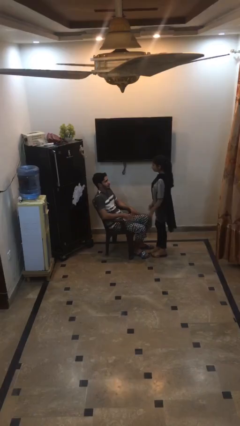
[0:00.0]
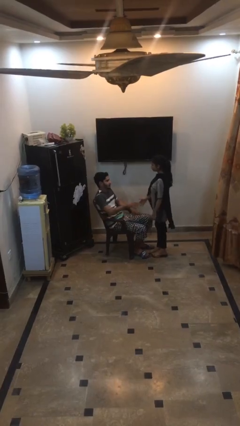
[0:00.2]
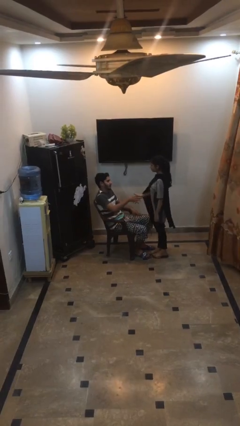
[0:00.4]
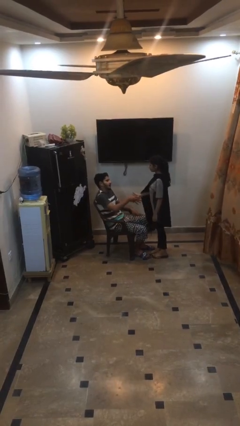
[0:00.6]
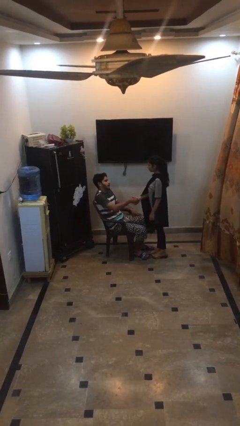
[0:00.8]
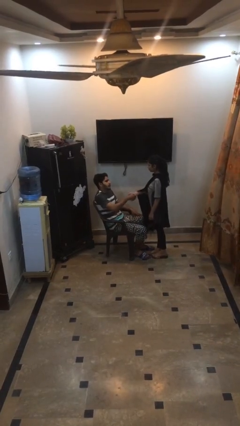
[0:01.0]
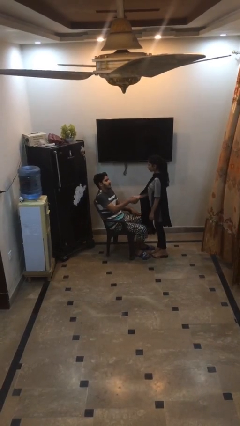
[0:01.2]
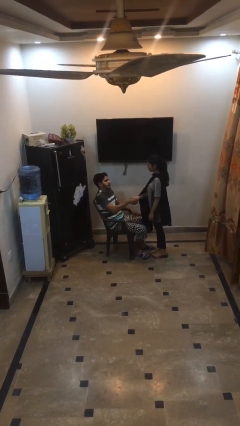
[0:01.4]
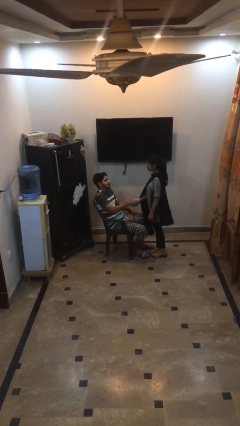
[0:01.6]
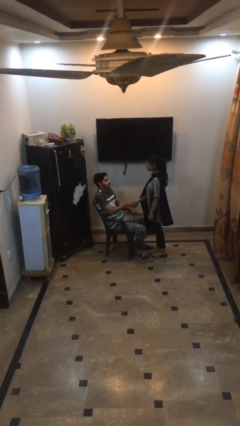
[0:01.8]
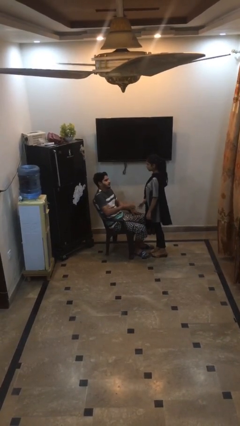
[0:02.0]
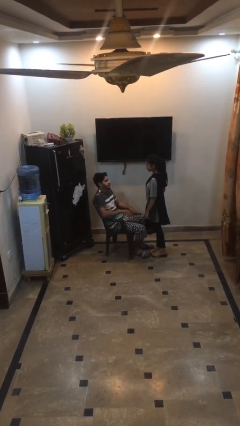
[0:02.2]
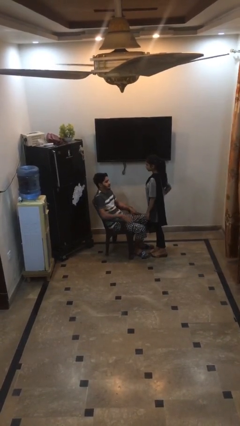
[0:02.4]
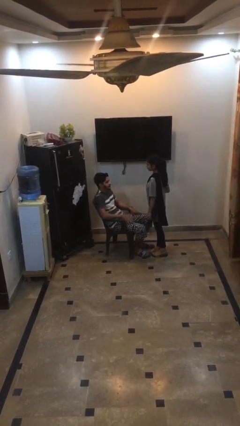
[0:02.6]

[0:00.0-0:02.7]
person shakes hand

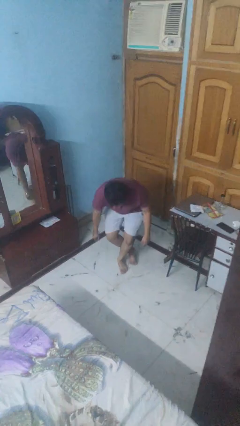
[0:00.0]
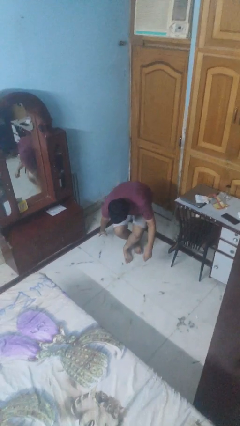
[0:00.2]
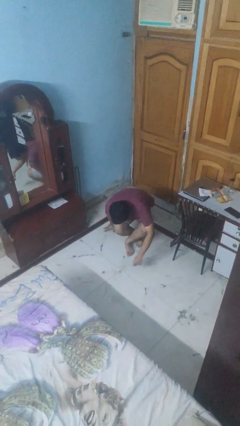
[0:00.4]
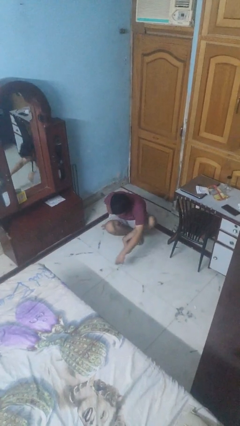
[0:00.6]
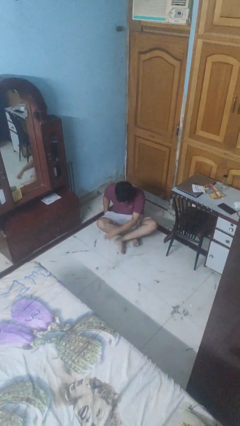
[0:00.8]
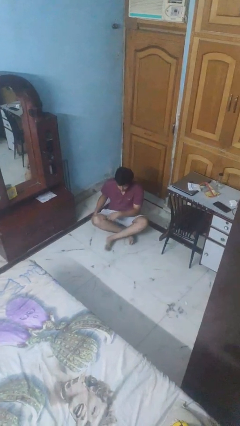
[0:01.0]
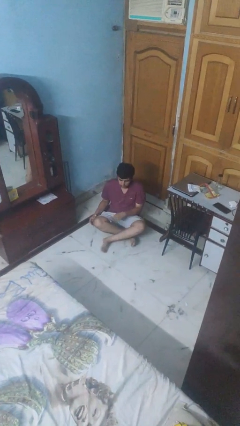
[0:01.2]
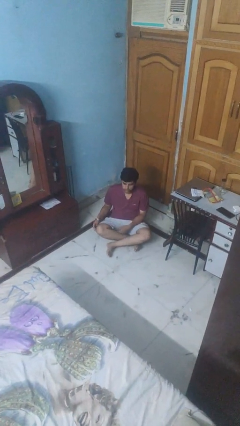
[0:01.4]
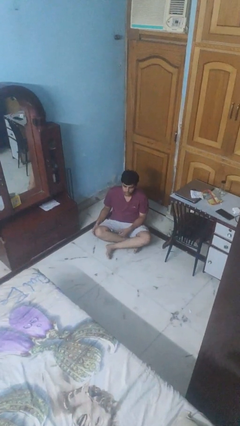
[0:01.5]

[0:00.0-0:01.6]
person sits crisscross

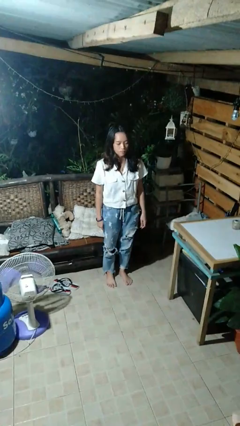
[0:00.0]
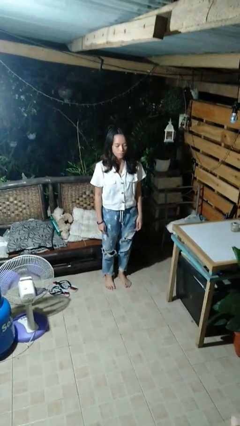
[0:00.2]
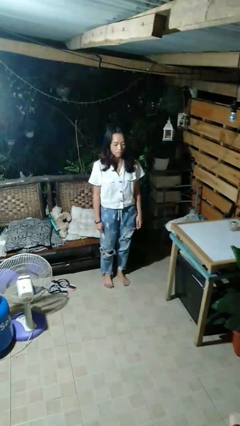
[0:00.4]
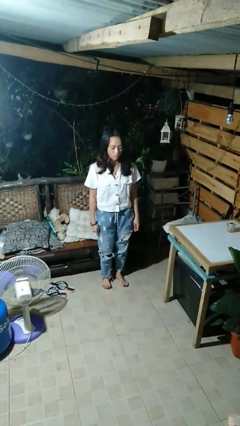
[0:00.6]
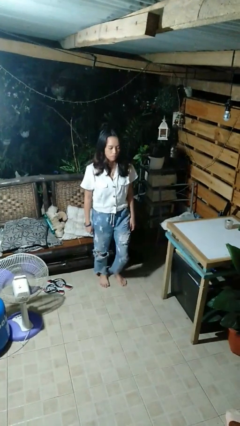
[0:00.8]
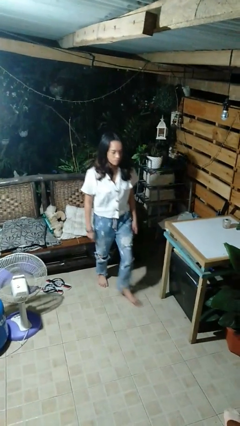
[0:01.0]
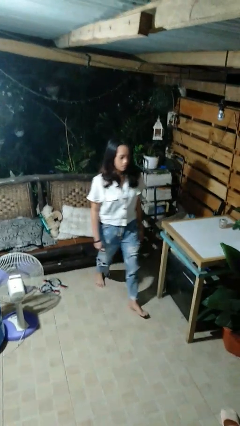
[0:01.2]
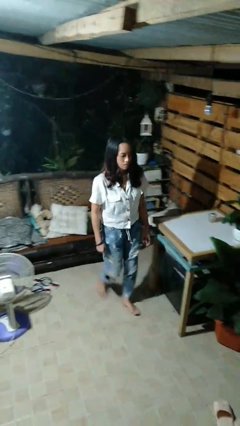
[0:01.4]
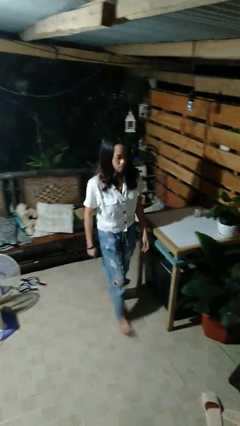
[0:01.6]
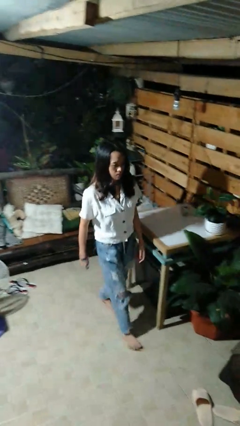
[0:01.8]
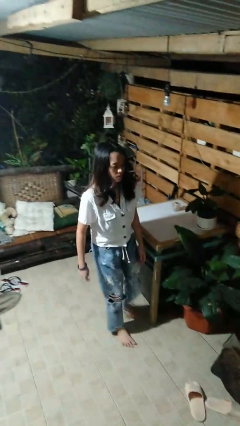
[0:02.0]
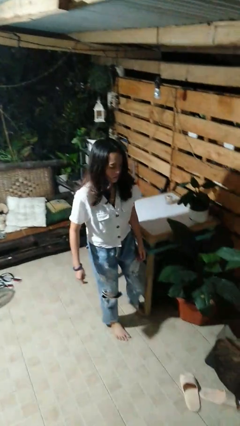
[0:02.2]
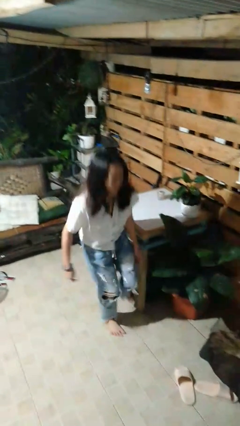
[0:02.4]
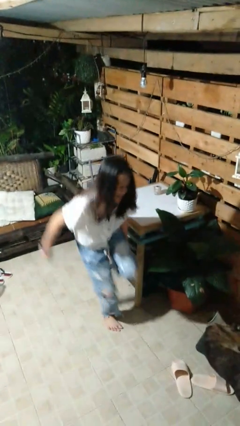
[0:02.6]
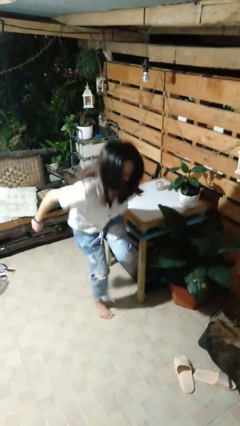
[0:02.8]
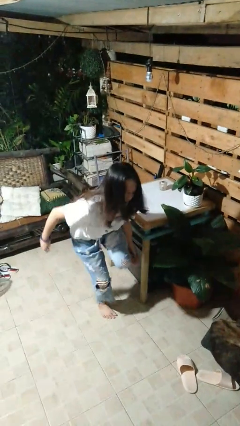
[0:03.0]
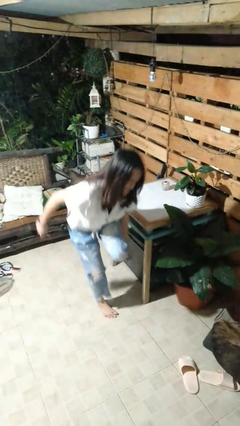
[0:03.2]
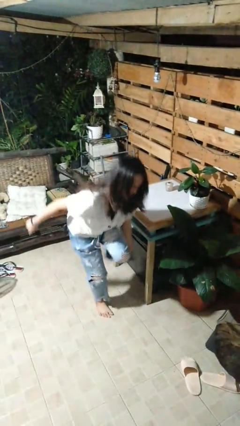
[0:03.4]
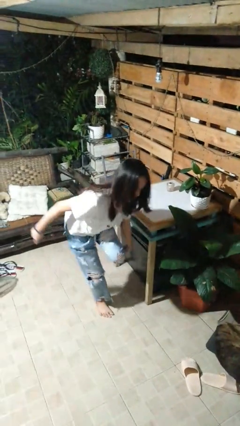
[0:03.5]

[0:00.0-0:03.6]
person stubs toe

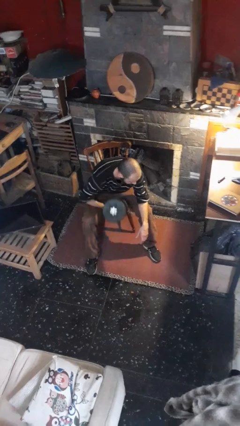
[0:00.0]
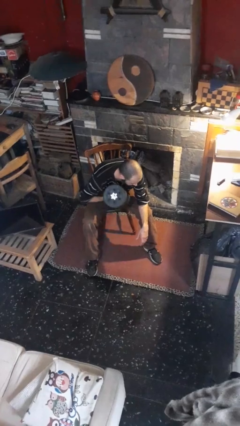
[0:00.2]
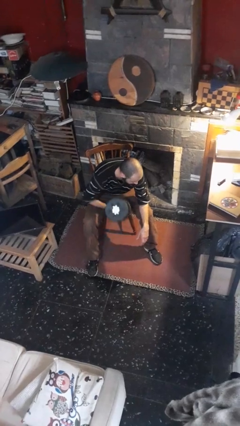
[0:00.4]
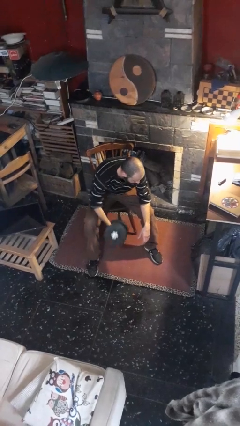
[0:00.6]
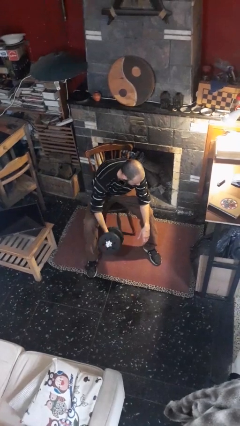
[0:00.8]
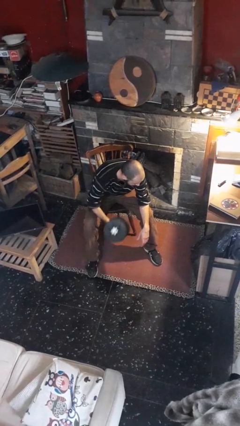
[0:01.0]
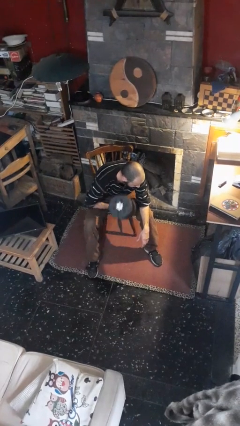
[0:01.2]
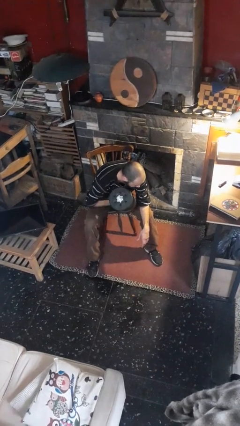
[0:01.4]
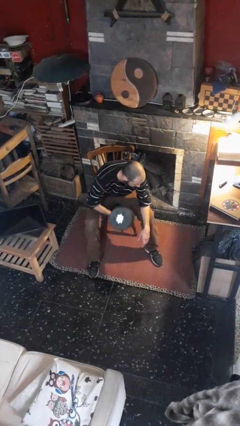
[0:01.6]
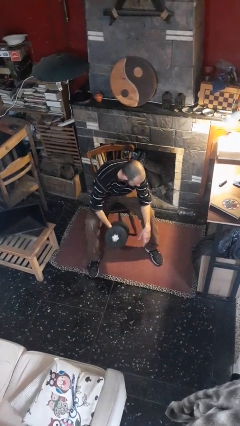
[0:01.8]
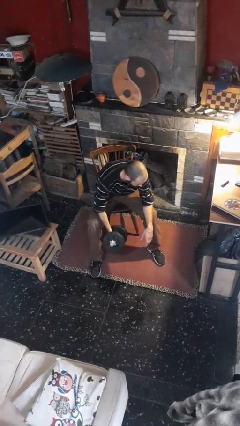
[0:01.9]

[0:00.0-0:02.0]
person lifts dumbbells

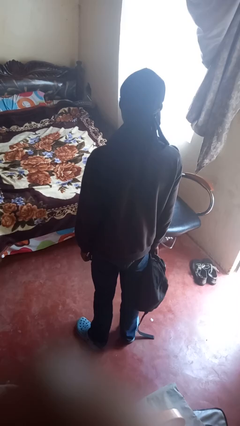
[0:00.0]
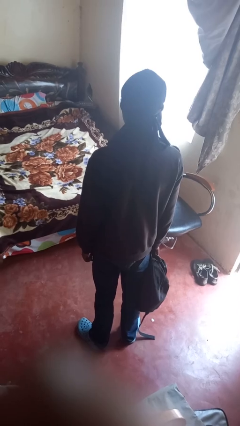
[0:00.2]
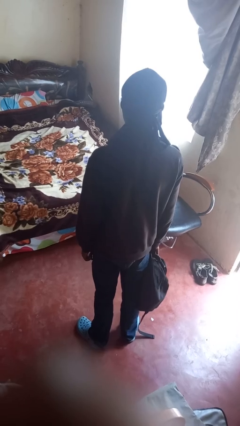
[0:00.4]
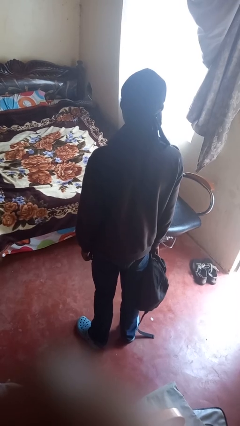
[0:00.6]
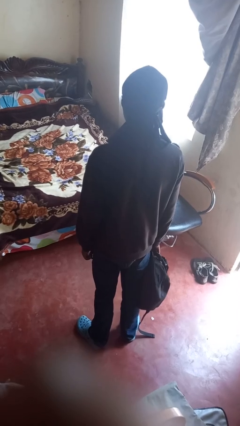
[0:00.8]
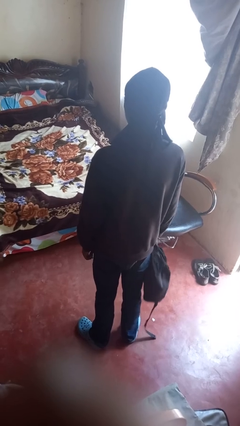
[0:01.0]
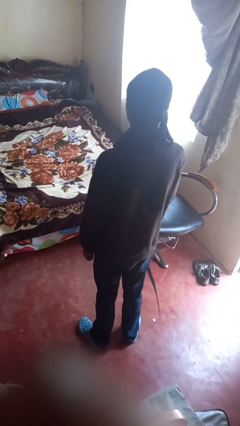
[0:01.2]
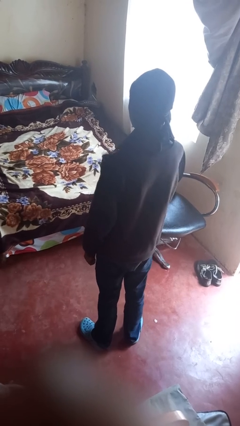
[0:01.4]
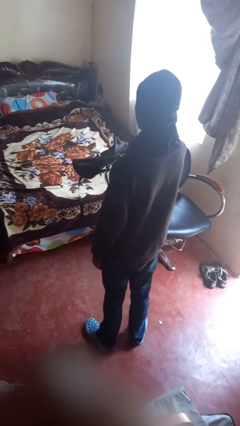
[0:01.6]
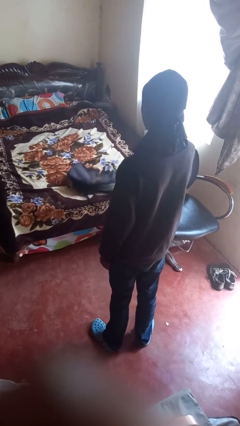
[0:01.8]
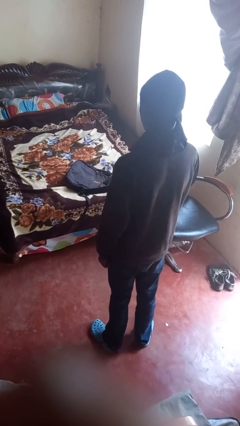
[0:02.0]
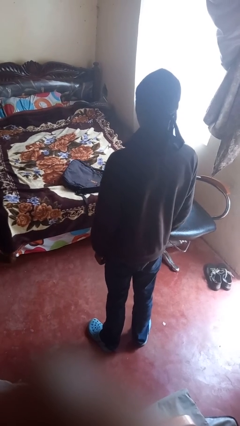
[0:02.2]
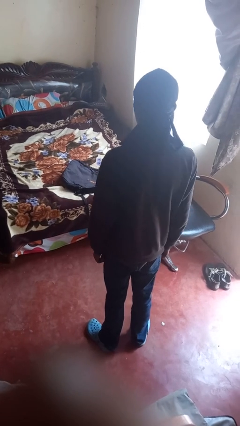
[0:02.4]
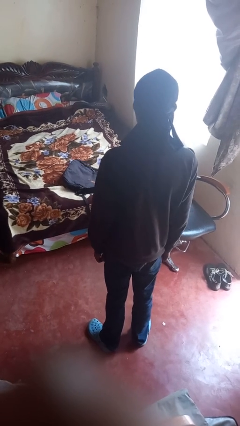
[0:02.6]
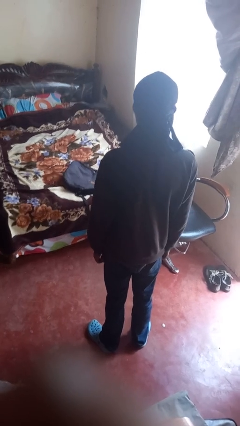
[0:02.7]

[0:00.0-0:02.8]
person throws object on bed

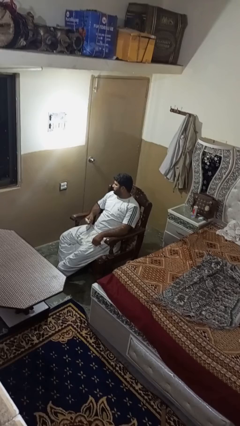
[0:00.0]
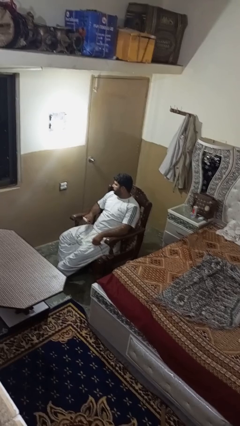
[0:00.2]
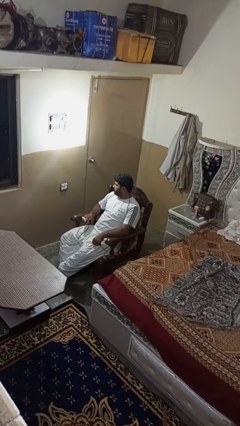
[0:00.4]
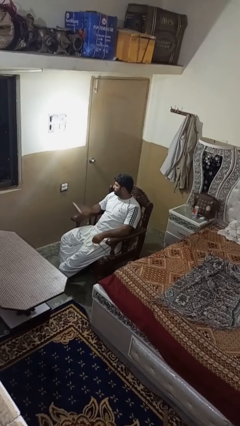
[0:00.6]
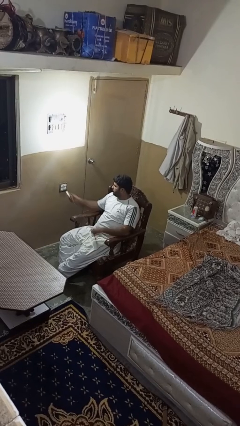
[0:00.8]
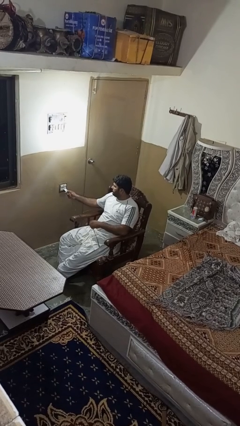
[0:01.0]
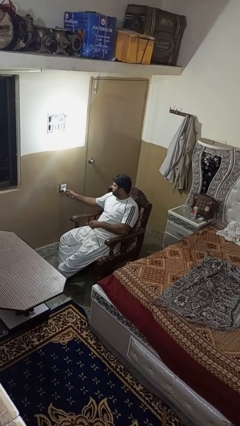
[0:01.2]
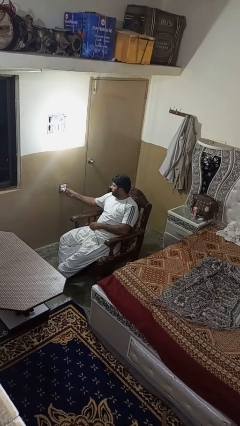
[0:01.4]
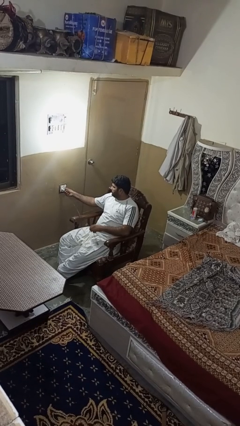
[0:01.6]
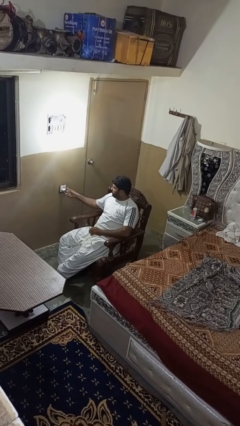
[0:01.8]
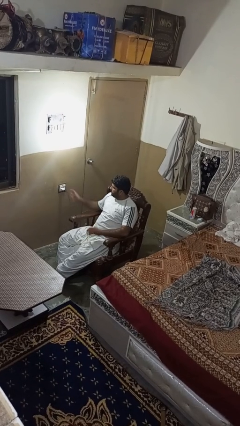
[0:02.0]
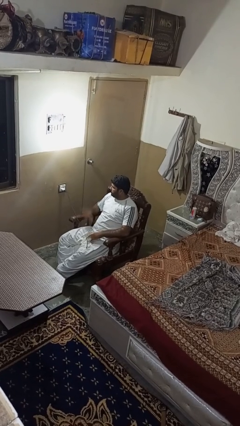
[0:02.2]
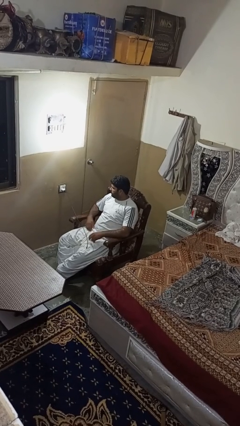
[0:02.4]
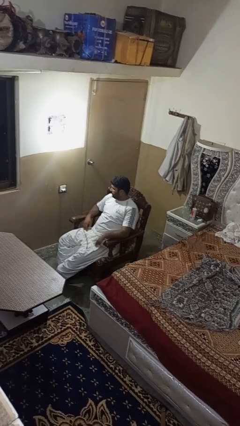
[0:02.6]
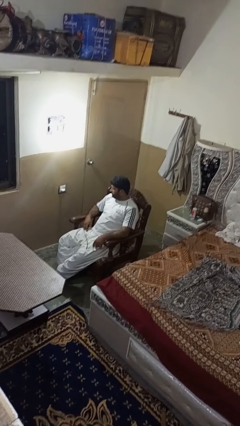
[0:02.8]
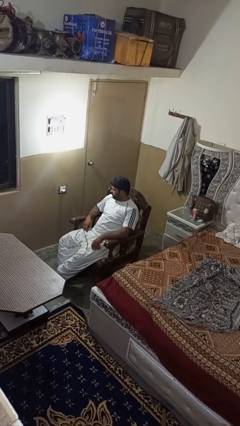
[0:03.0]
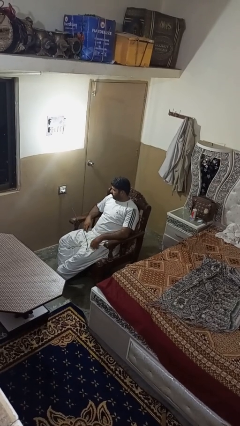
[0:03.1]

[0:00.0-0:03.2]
person plugs into electrical socket

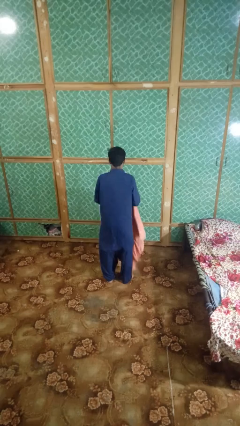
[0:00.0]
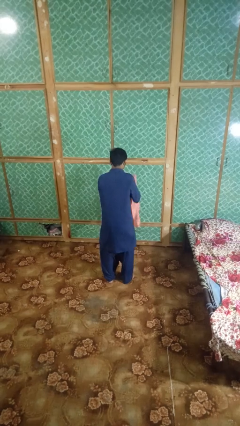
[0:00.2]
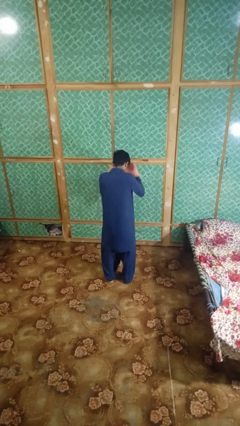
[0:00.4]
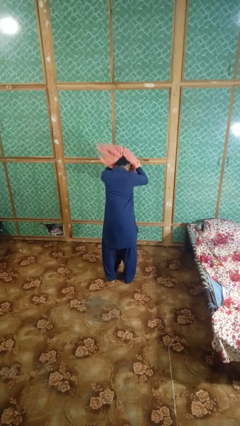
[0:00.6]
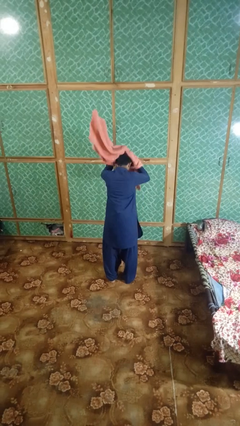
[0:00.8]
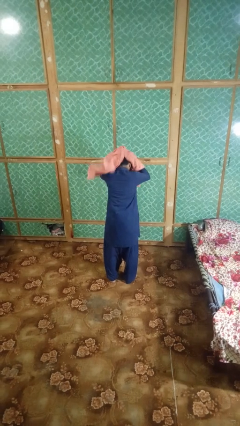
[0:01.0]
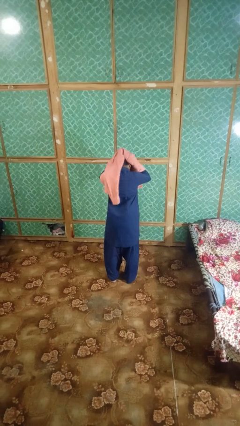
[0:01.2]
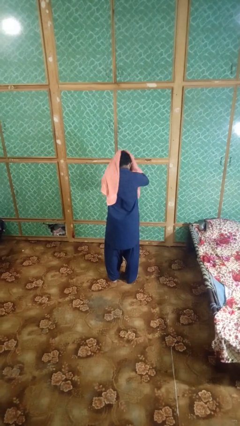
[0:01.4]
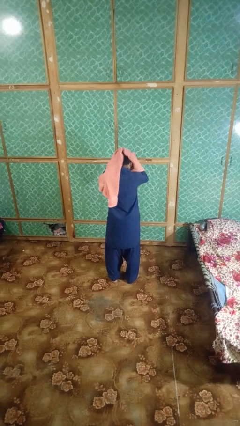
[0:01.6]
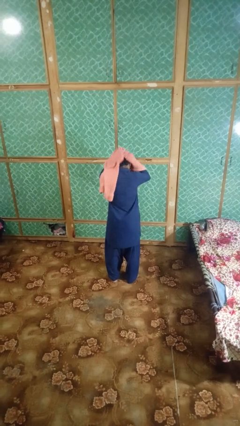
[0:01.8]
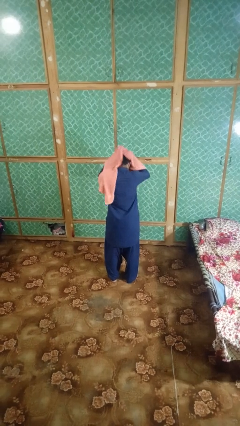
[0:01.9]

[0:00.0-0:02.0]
person dries hair with towel
